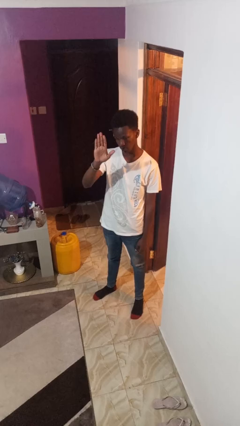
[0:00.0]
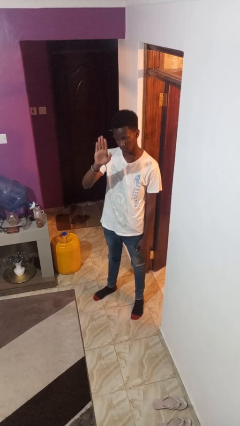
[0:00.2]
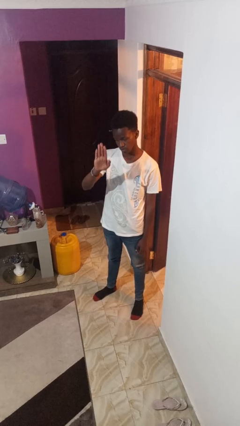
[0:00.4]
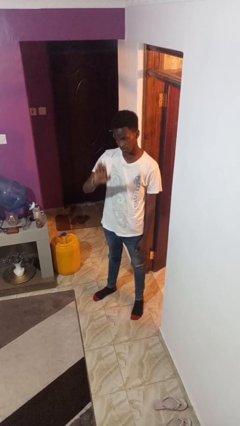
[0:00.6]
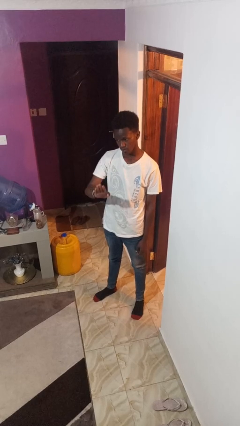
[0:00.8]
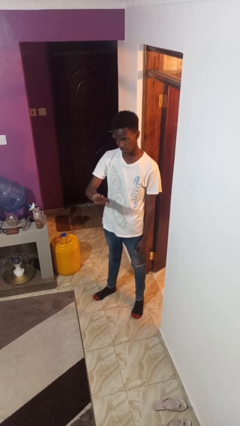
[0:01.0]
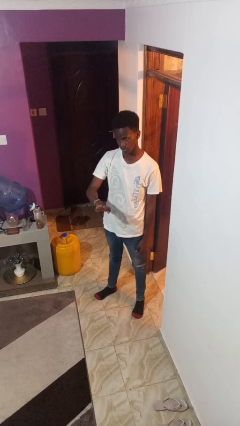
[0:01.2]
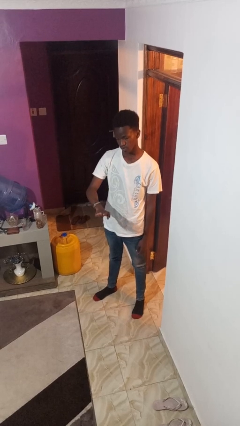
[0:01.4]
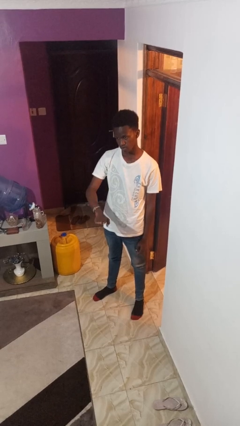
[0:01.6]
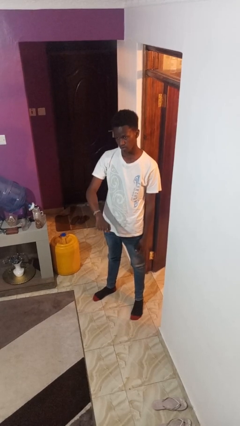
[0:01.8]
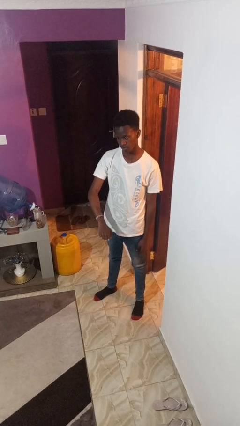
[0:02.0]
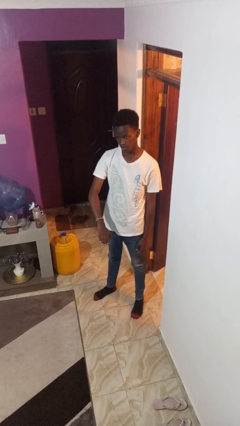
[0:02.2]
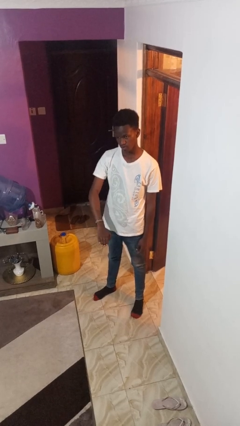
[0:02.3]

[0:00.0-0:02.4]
person gestures swipe down

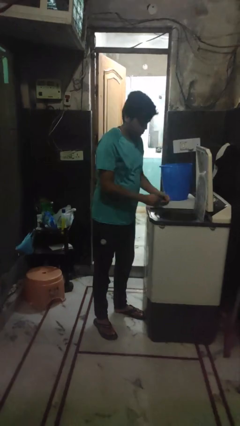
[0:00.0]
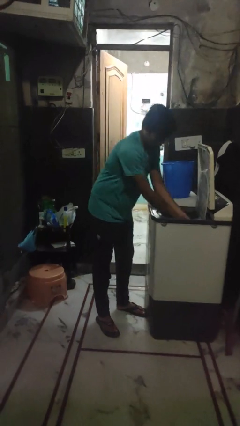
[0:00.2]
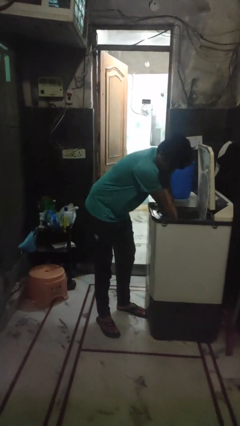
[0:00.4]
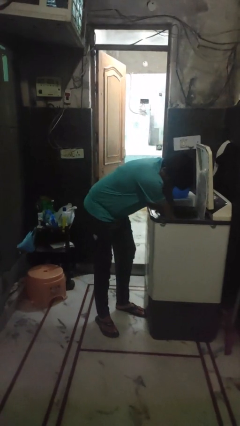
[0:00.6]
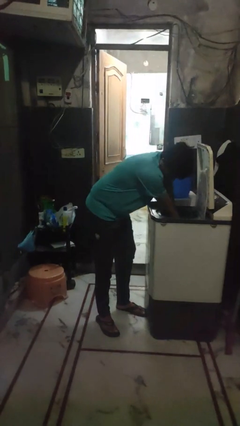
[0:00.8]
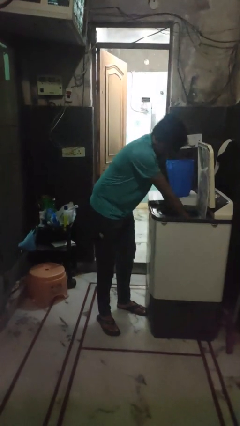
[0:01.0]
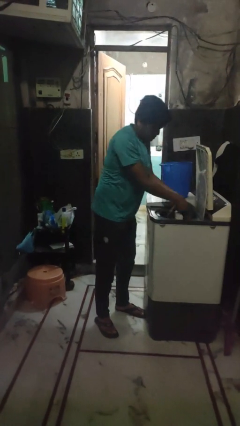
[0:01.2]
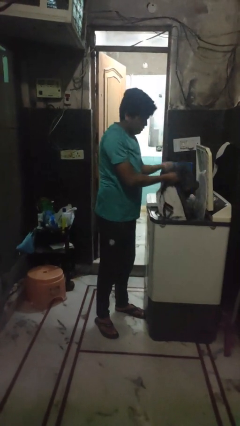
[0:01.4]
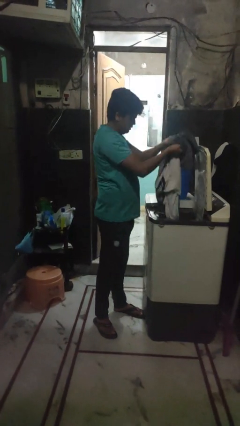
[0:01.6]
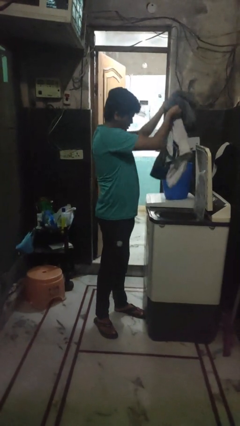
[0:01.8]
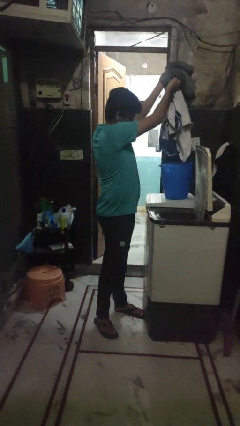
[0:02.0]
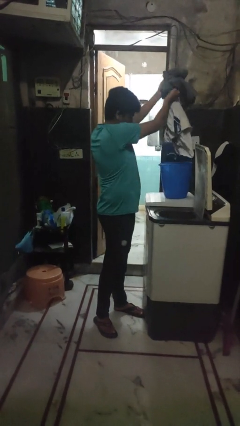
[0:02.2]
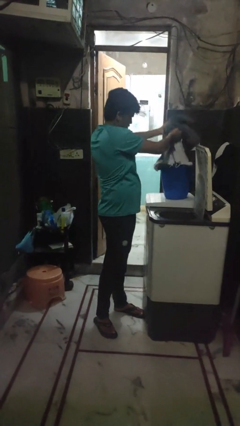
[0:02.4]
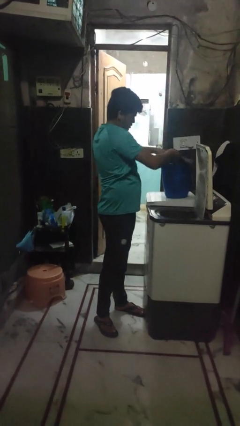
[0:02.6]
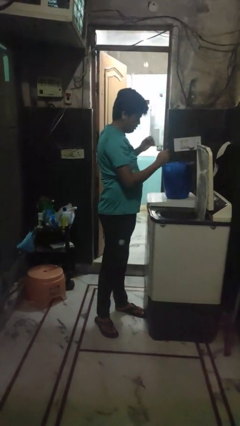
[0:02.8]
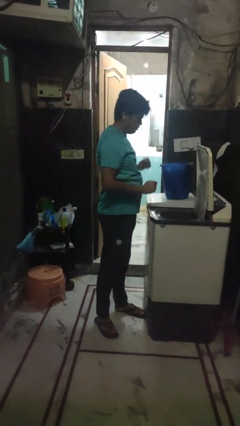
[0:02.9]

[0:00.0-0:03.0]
person unloads clotheswasher

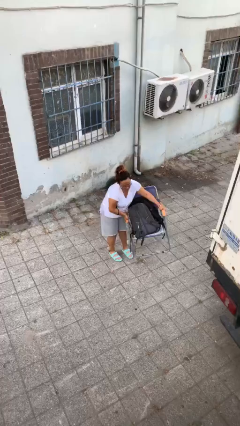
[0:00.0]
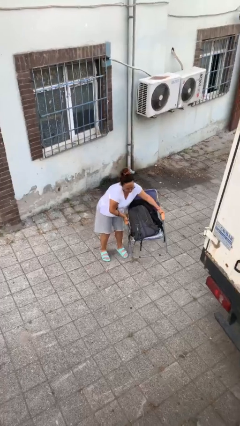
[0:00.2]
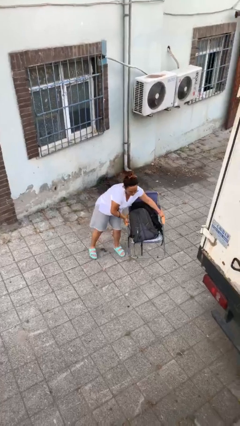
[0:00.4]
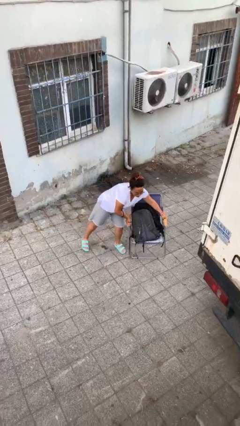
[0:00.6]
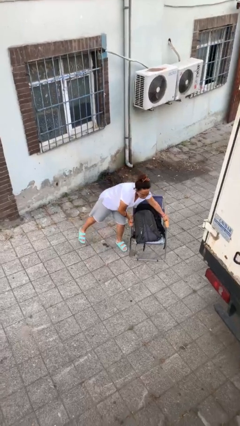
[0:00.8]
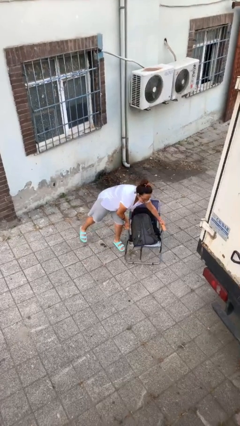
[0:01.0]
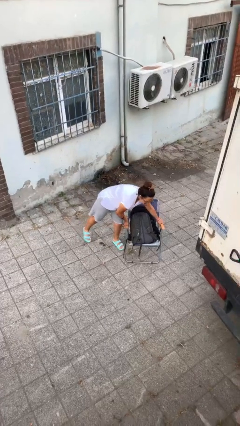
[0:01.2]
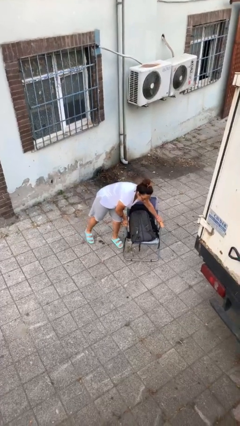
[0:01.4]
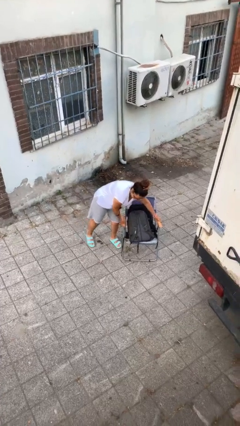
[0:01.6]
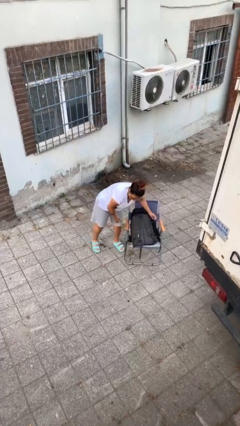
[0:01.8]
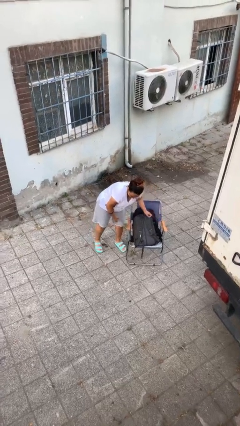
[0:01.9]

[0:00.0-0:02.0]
person puts down object on floor

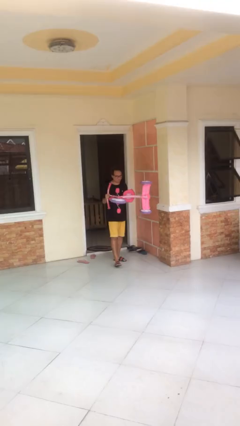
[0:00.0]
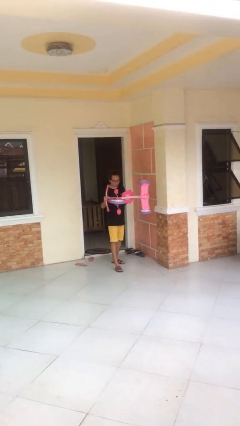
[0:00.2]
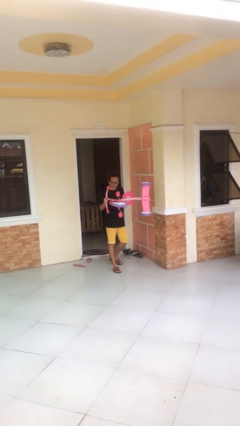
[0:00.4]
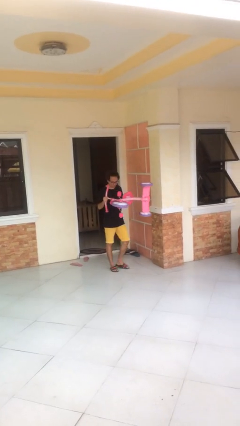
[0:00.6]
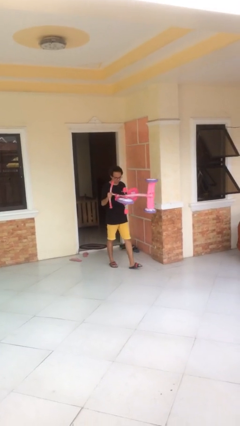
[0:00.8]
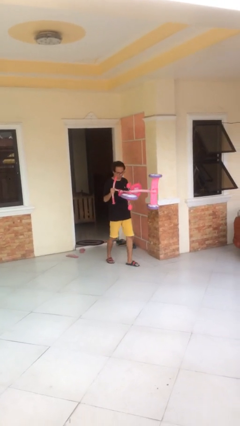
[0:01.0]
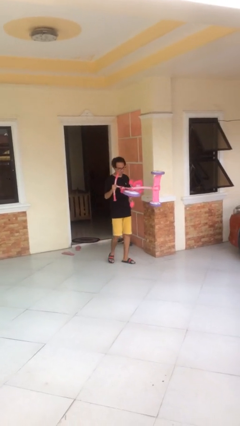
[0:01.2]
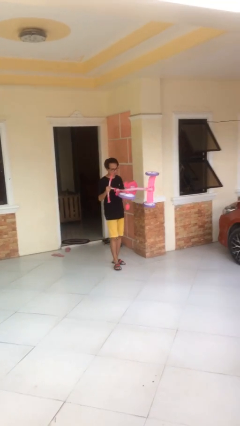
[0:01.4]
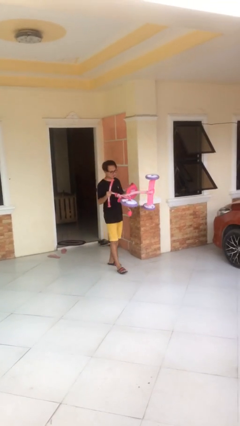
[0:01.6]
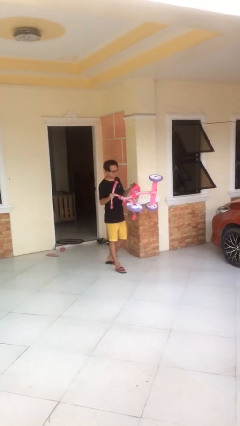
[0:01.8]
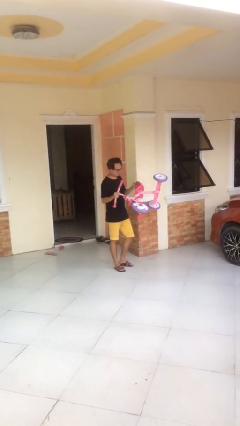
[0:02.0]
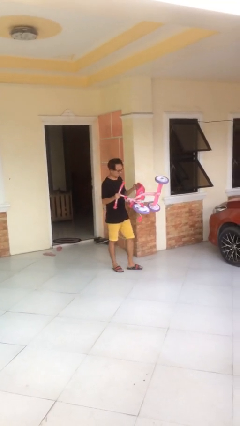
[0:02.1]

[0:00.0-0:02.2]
person carries heavy object

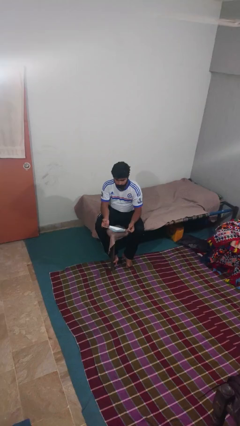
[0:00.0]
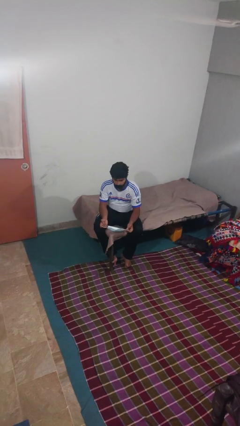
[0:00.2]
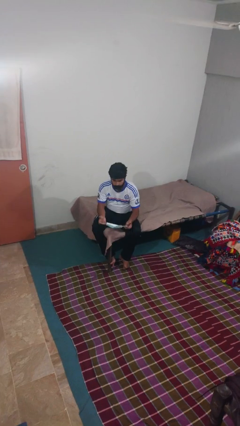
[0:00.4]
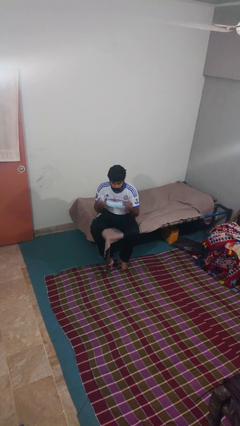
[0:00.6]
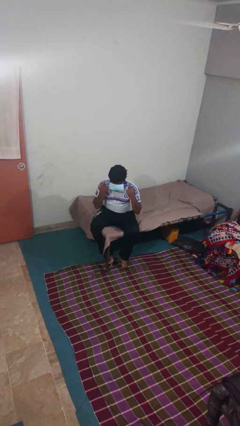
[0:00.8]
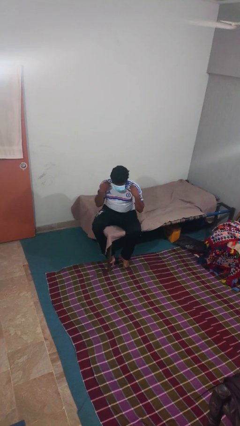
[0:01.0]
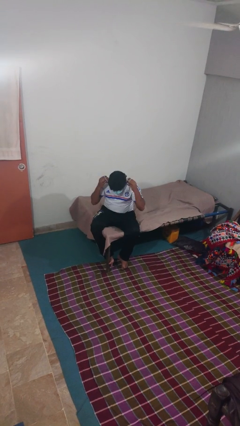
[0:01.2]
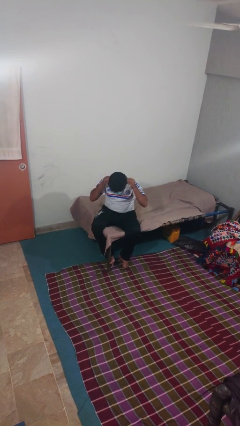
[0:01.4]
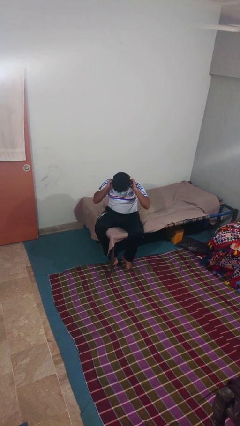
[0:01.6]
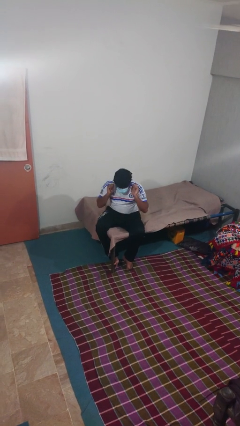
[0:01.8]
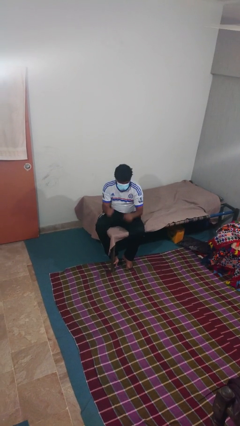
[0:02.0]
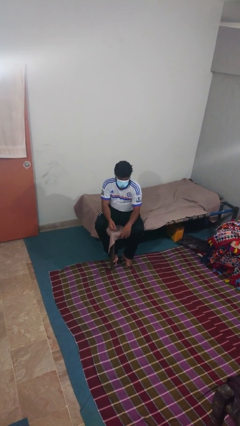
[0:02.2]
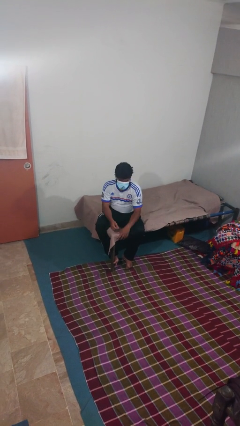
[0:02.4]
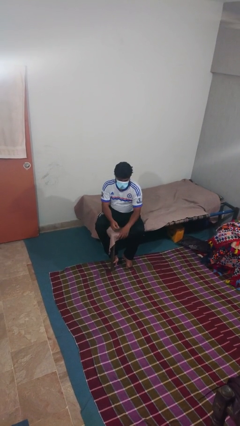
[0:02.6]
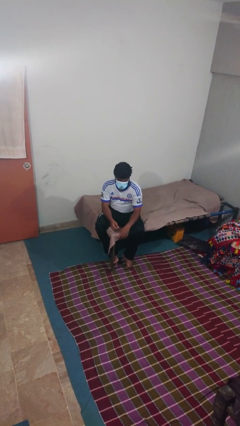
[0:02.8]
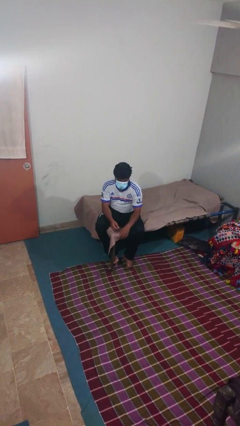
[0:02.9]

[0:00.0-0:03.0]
person puts on facemask

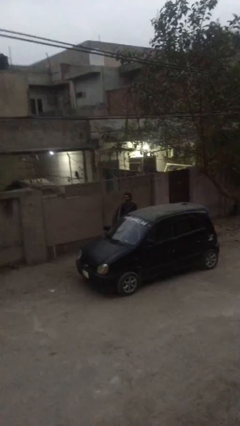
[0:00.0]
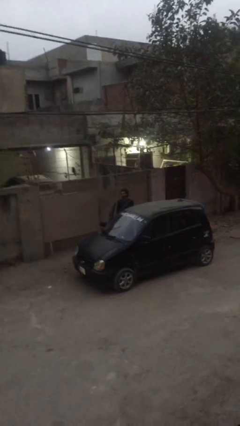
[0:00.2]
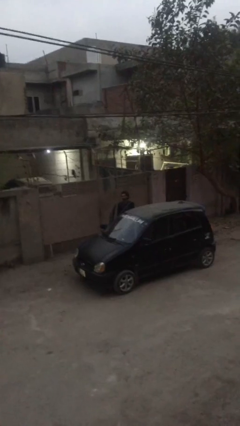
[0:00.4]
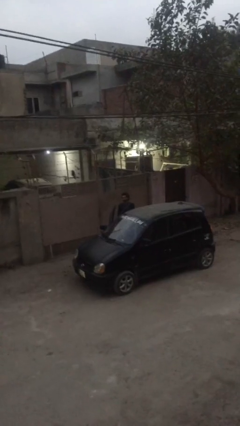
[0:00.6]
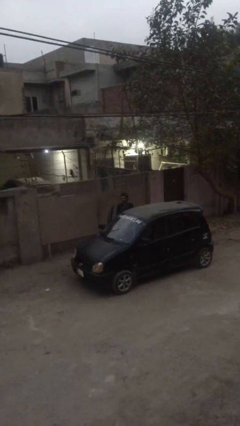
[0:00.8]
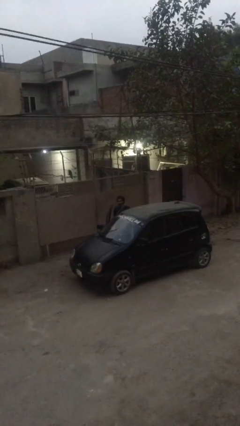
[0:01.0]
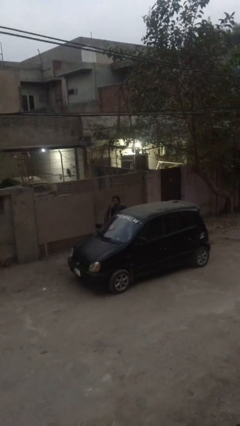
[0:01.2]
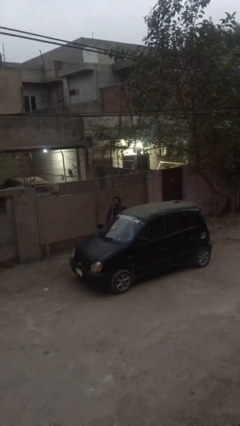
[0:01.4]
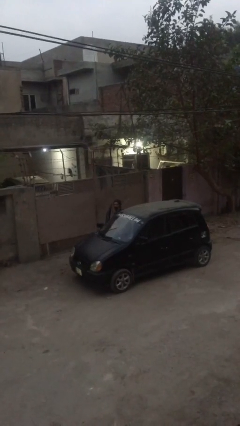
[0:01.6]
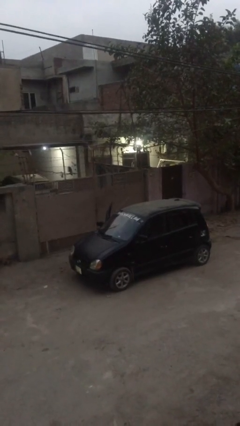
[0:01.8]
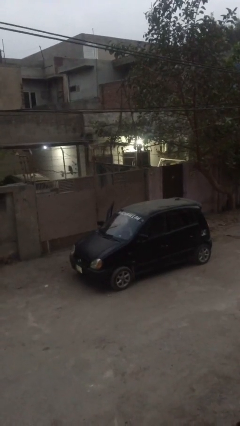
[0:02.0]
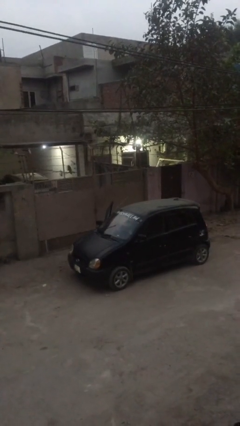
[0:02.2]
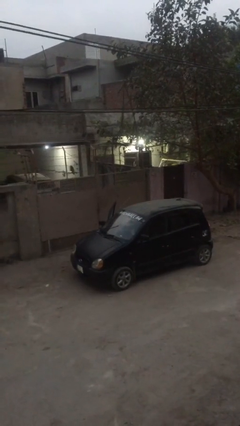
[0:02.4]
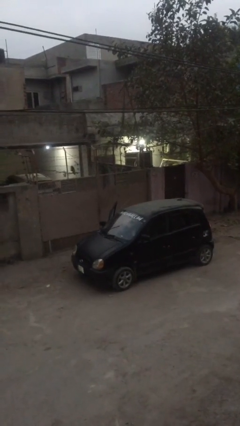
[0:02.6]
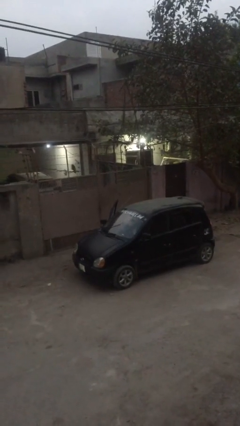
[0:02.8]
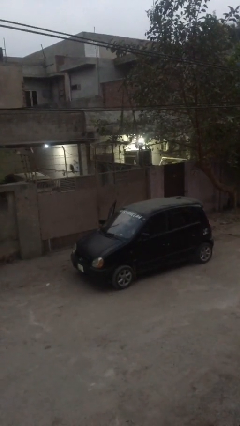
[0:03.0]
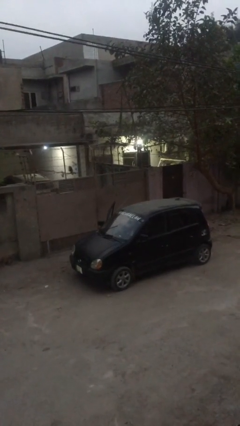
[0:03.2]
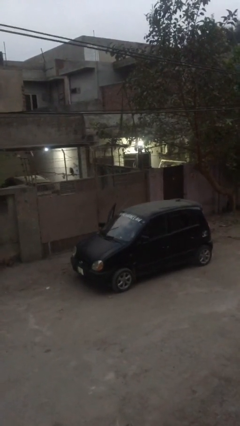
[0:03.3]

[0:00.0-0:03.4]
person enters car

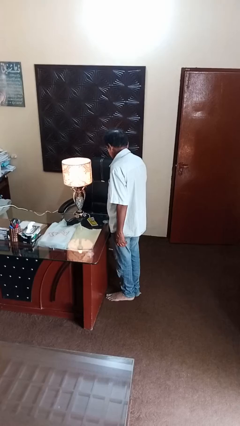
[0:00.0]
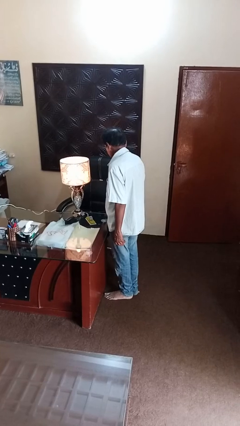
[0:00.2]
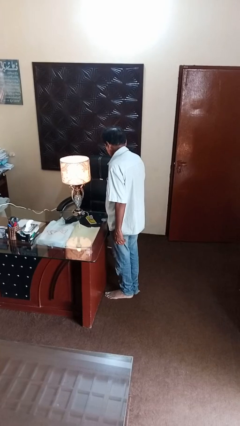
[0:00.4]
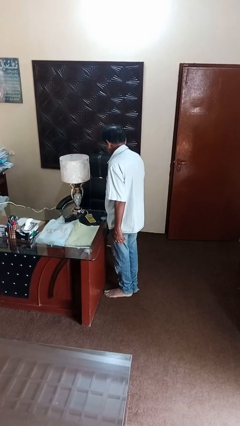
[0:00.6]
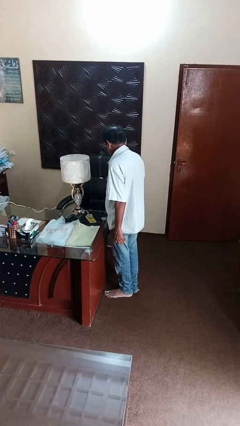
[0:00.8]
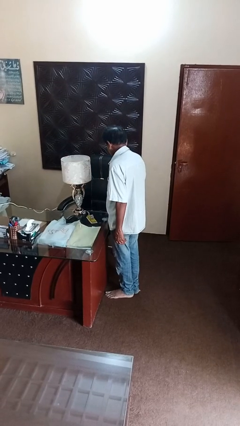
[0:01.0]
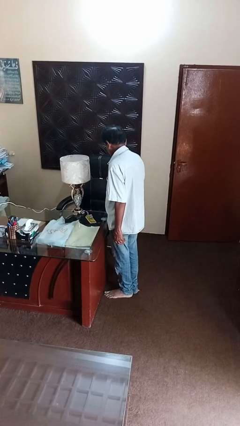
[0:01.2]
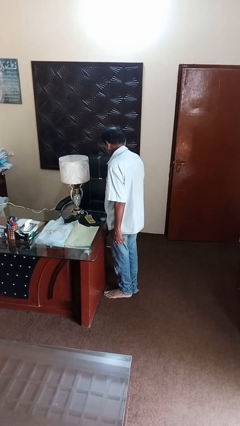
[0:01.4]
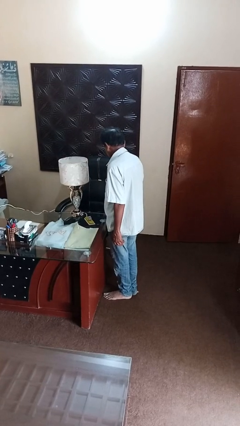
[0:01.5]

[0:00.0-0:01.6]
person turns off lamp
